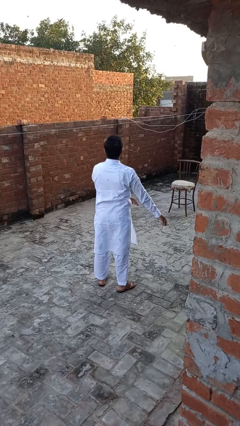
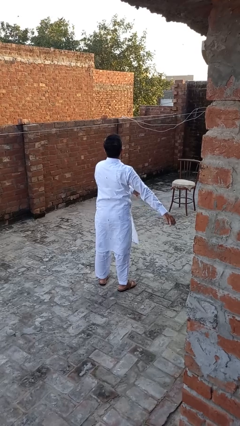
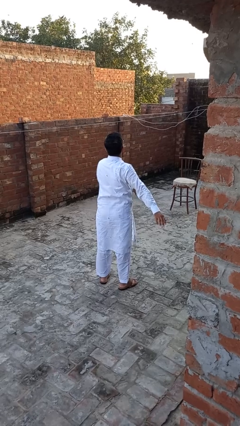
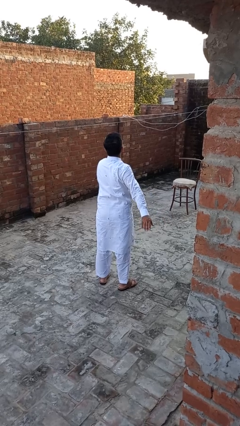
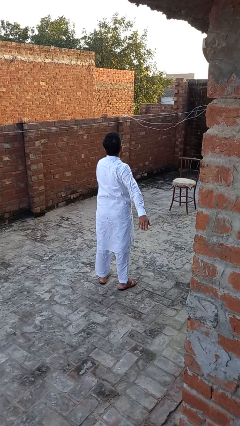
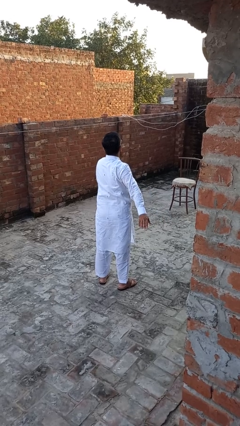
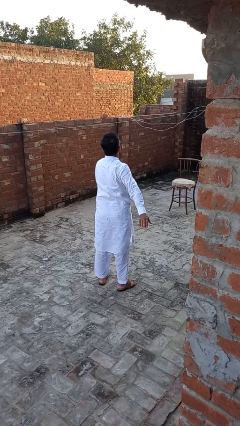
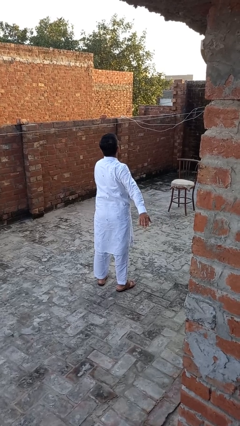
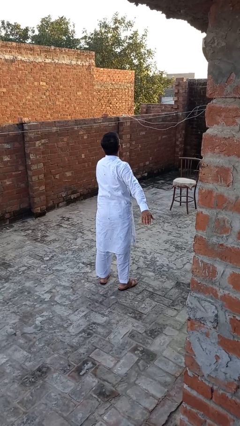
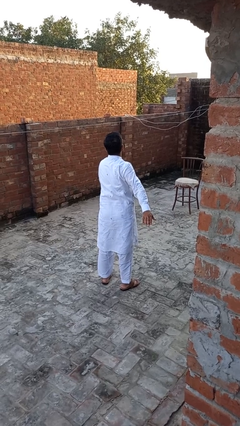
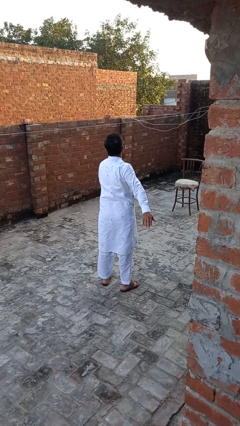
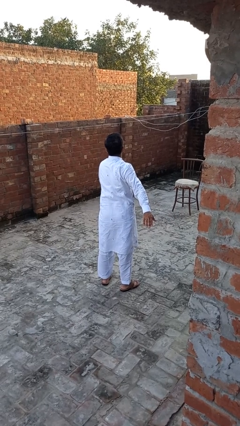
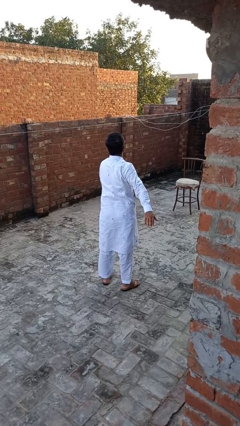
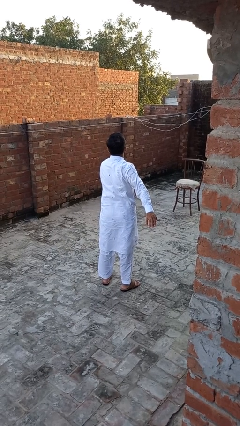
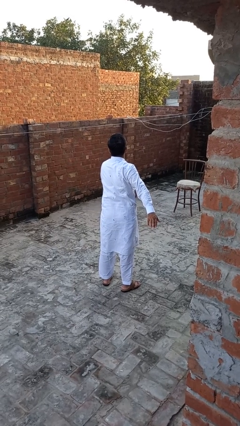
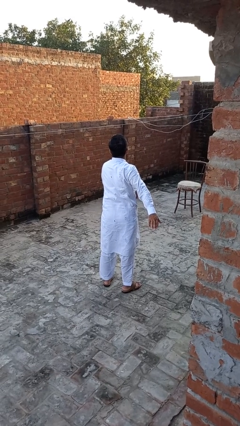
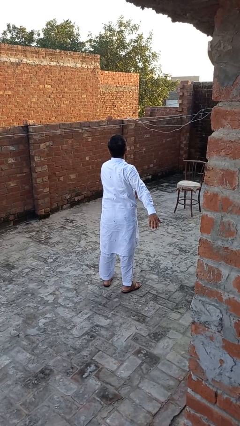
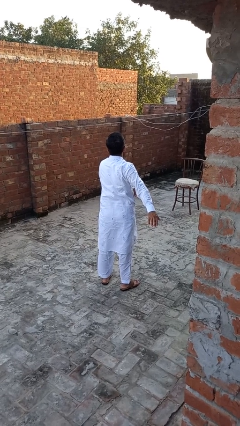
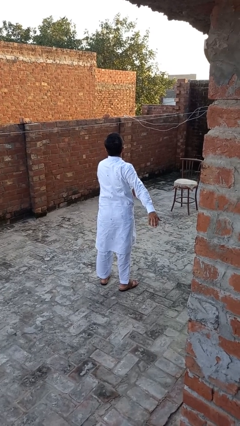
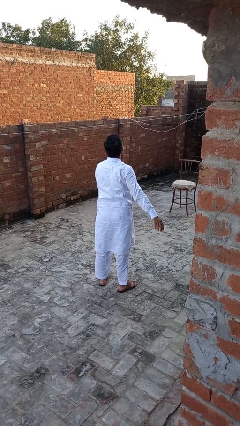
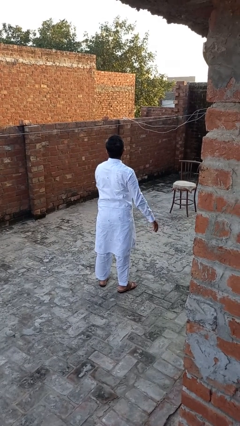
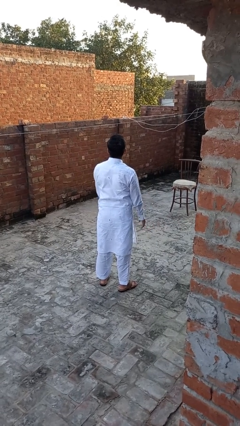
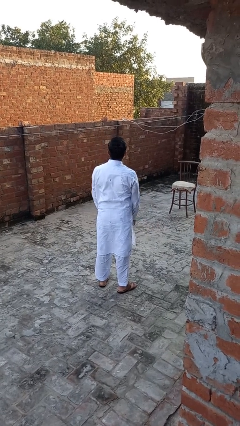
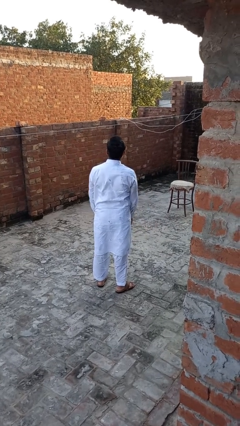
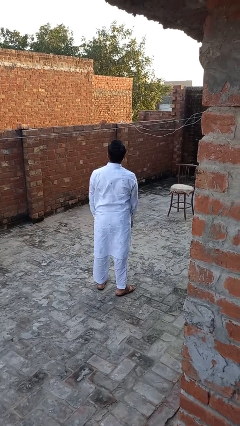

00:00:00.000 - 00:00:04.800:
person gestures swipe right

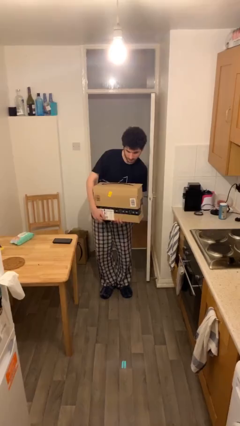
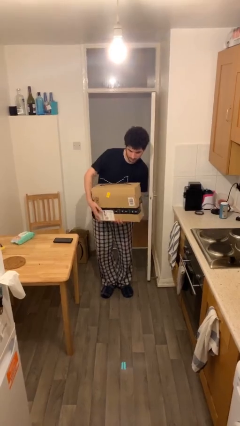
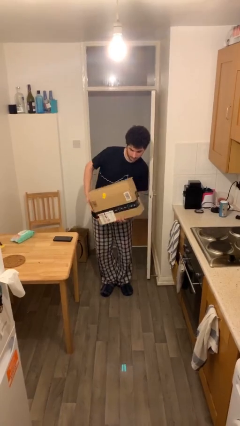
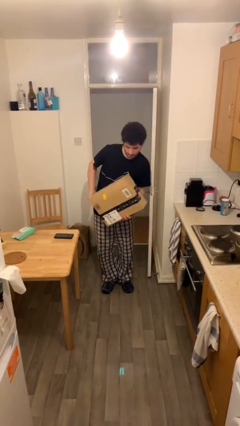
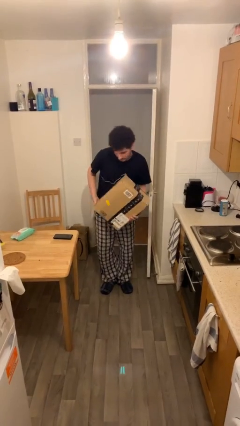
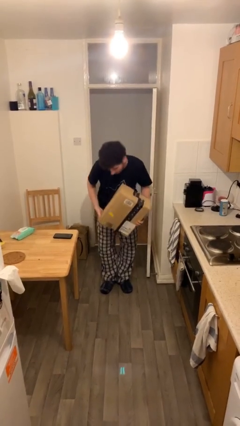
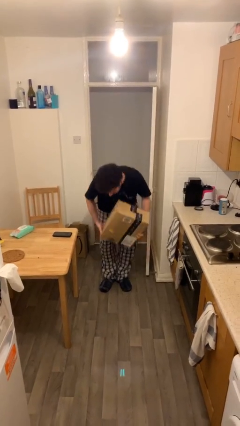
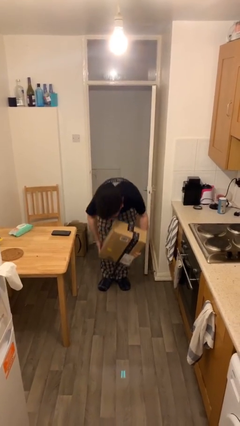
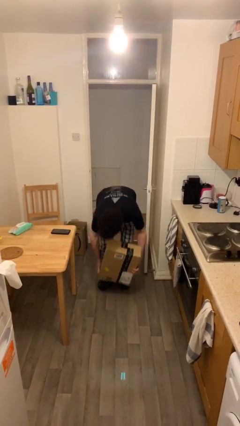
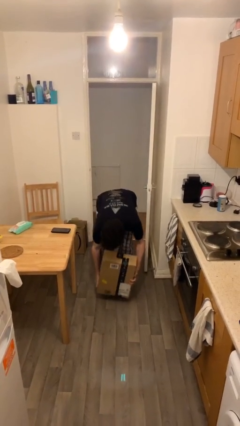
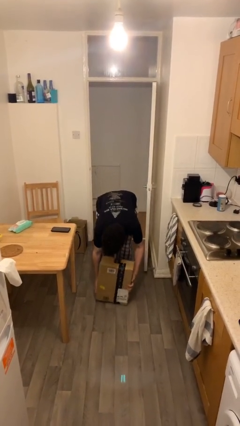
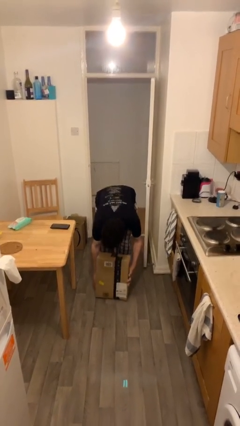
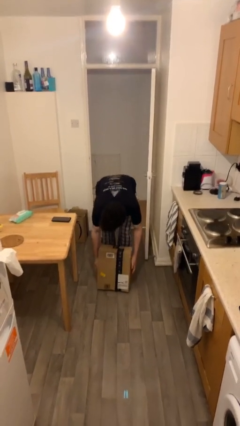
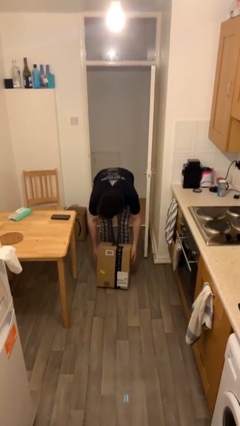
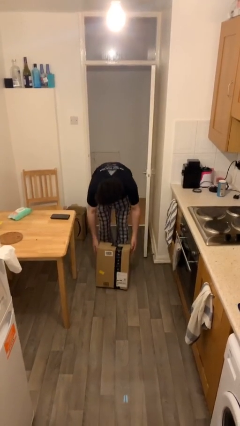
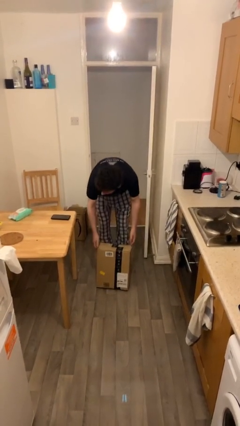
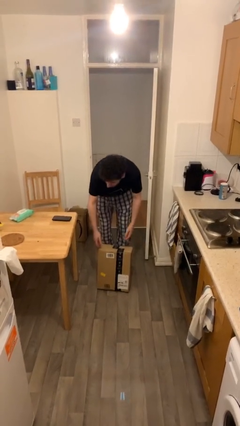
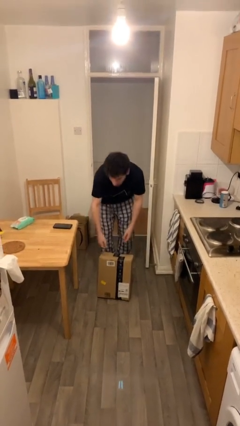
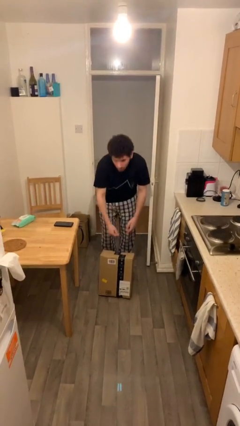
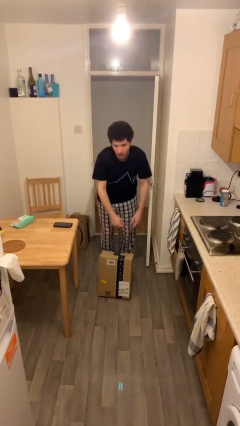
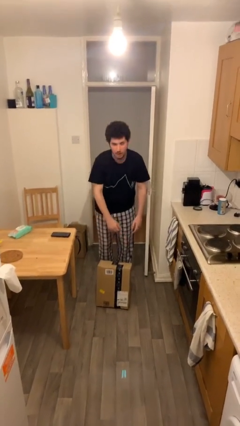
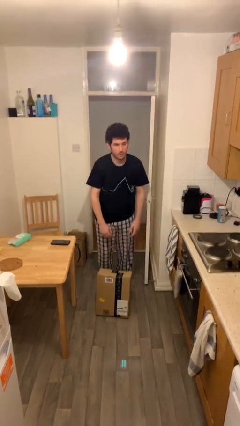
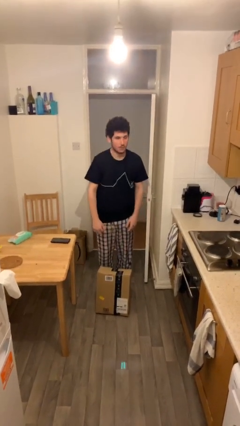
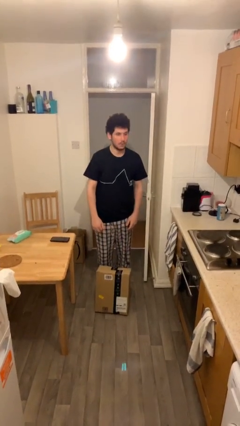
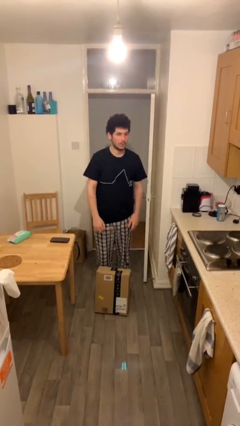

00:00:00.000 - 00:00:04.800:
person puts down object on floor

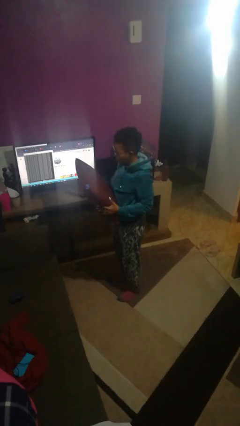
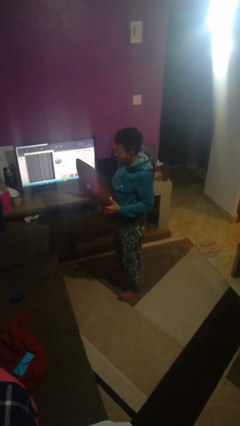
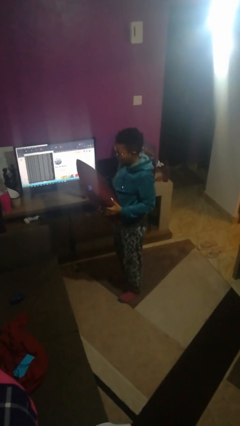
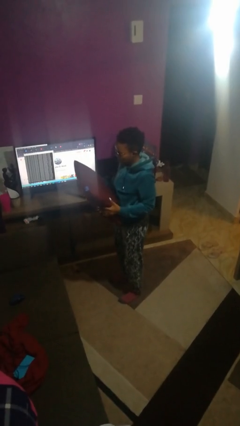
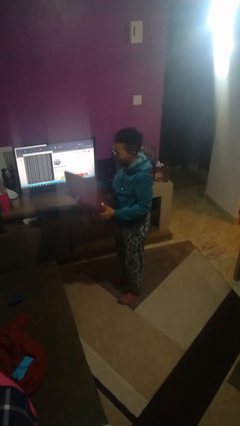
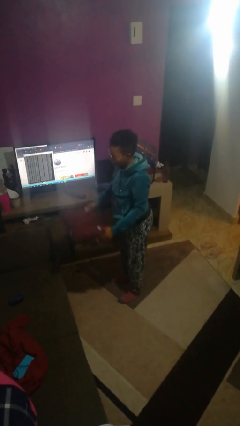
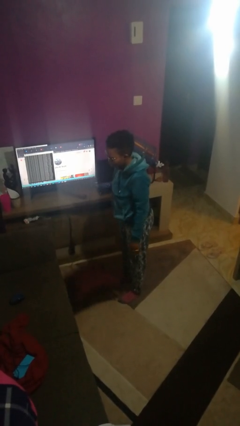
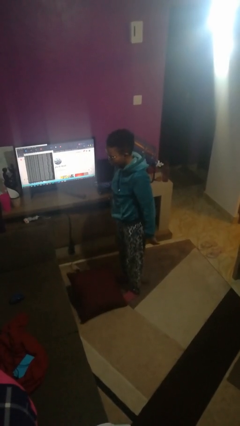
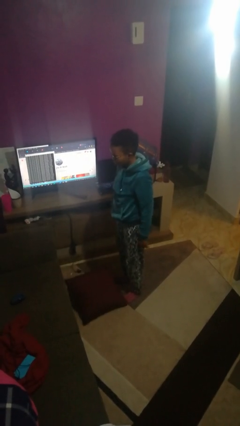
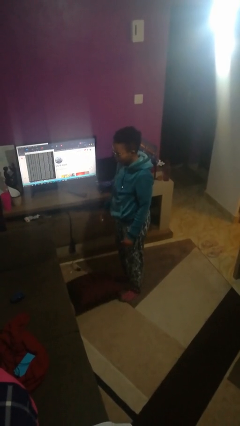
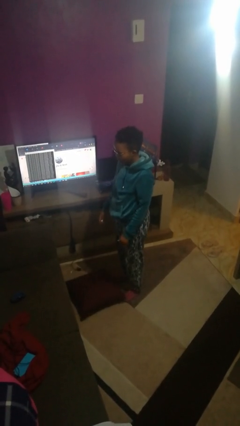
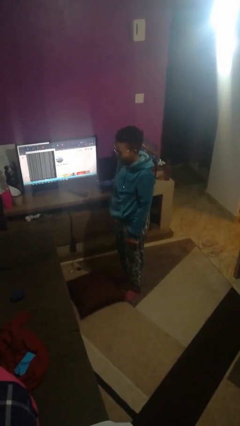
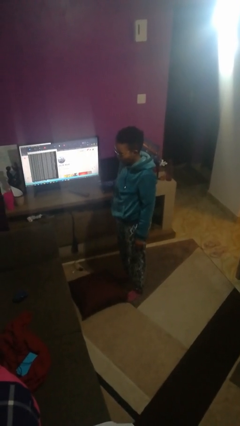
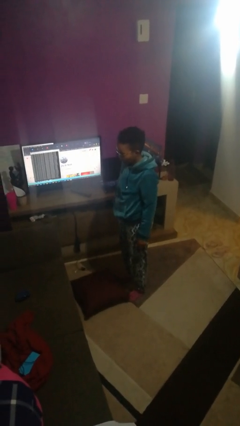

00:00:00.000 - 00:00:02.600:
person throws object to ground

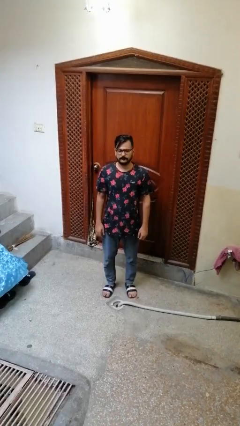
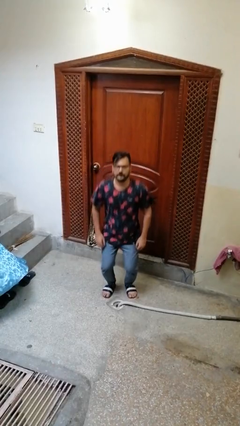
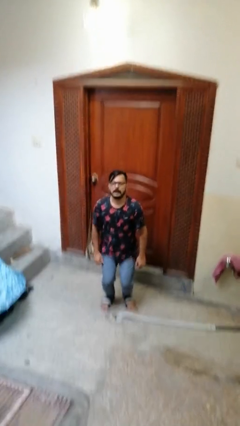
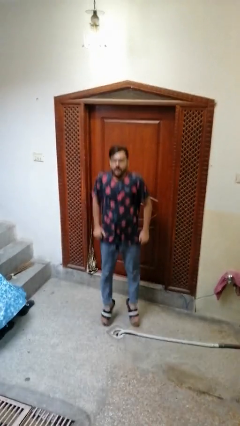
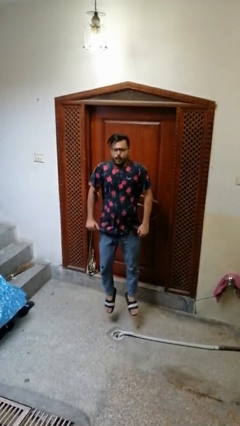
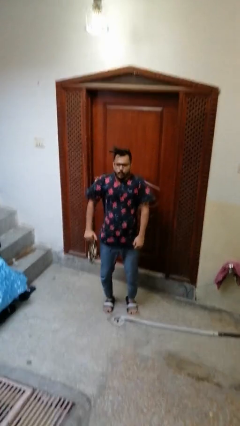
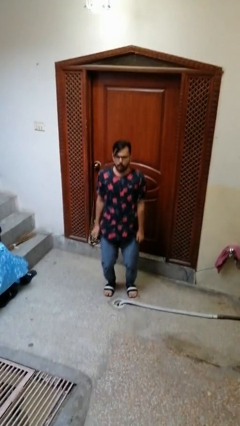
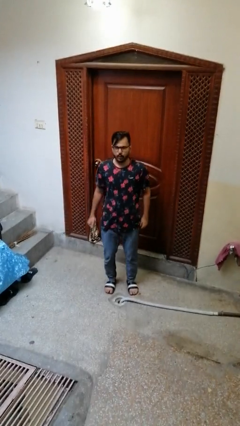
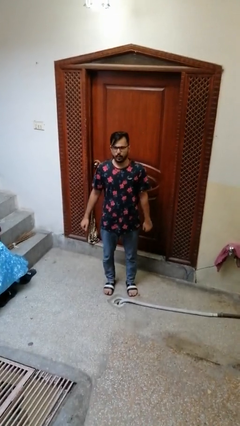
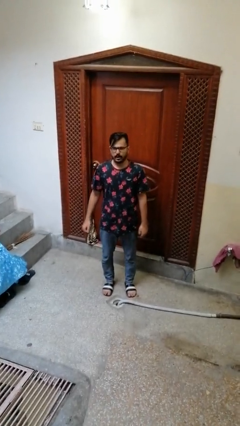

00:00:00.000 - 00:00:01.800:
person jumps

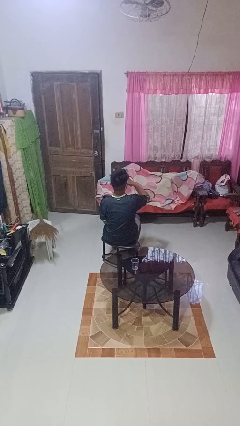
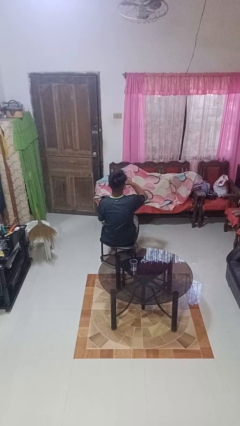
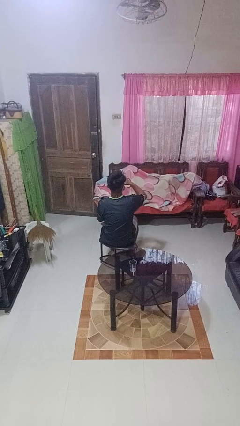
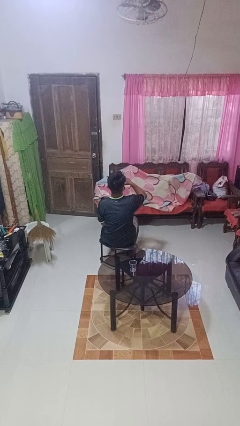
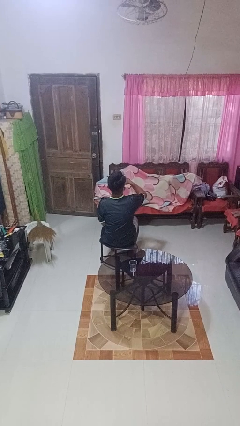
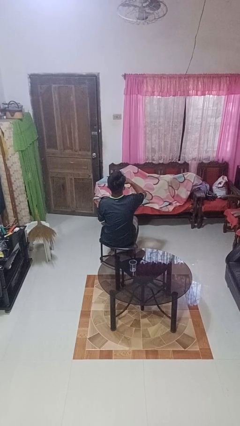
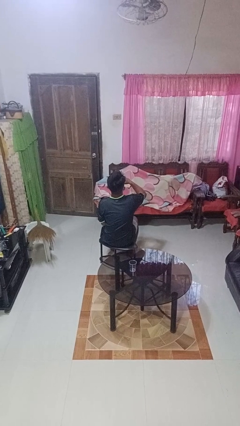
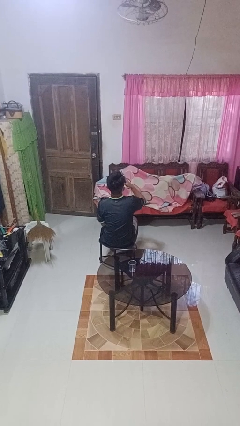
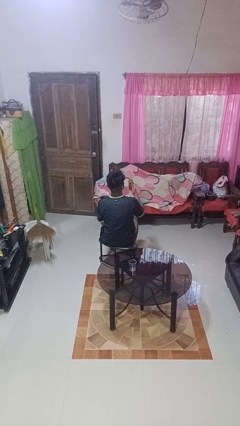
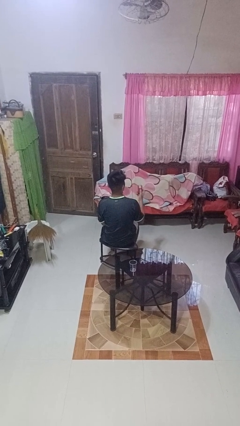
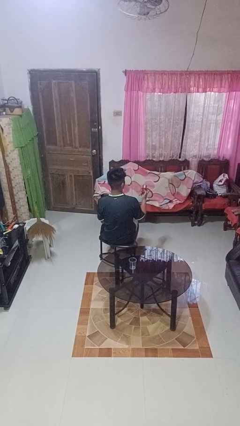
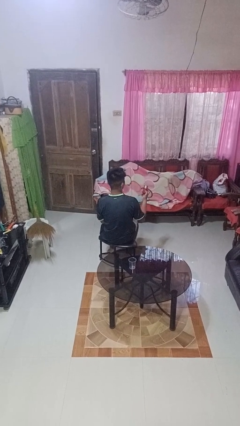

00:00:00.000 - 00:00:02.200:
person drinks from beverage can

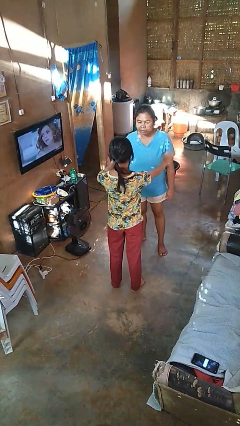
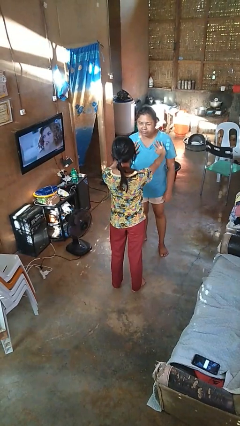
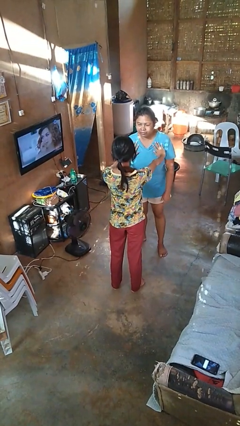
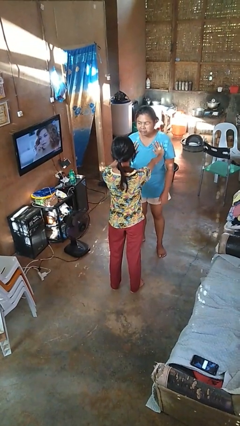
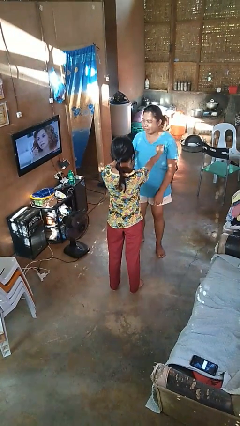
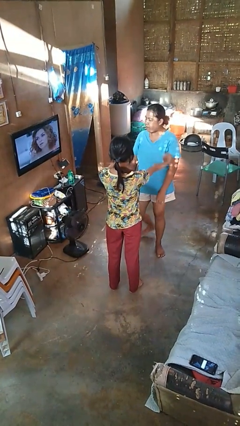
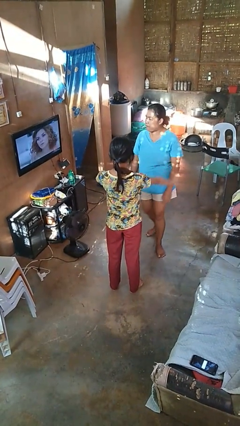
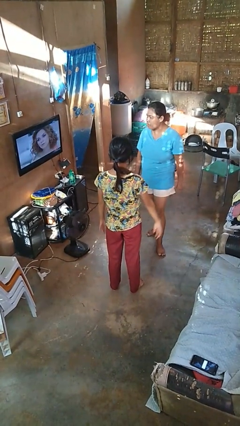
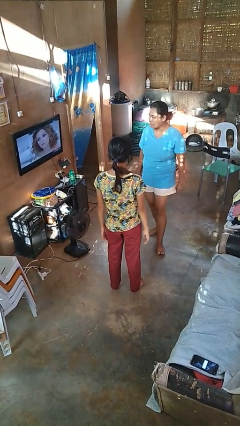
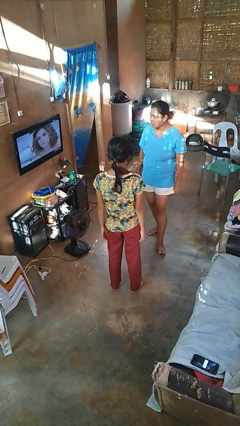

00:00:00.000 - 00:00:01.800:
person shoves person
